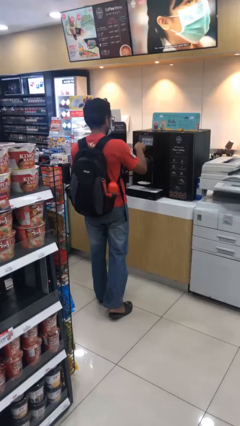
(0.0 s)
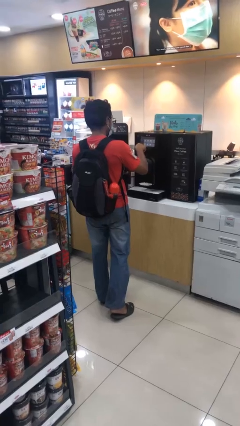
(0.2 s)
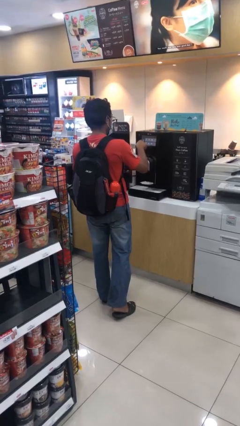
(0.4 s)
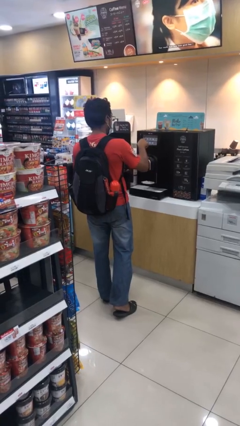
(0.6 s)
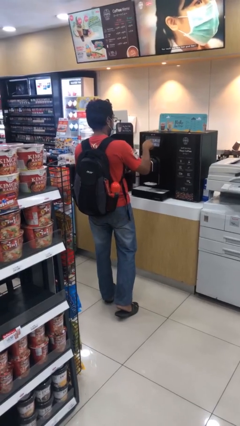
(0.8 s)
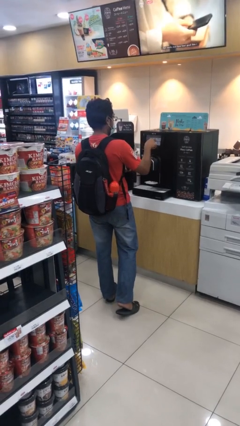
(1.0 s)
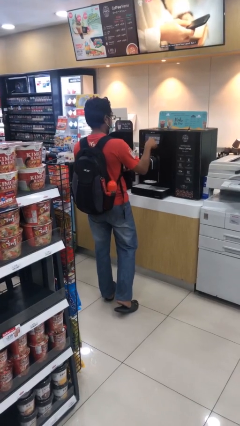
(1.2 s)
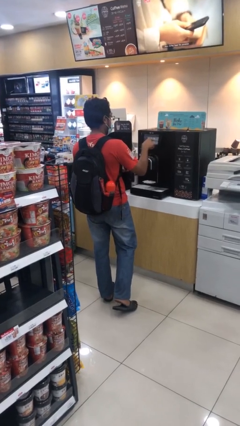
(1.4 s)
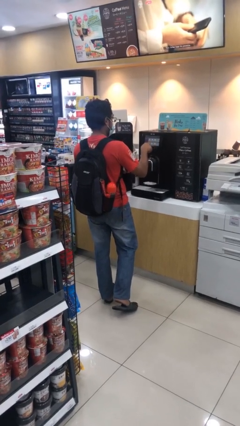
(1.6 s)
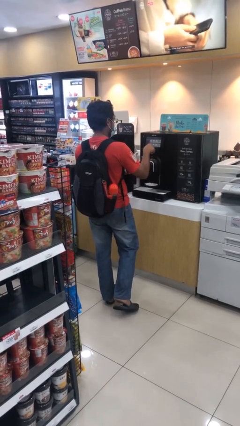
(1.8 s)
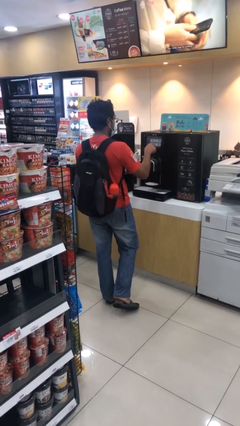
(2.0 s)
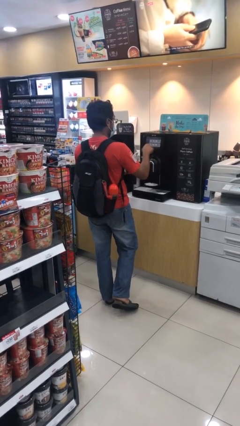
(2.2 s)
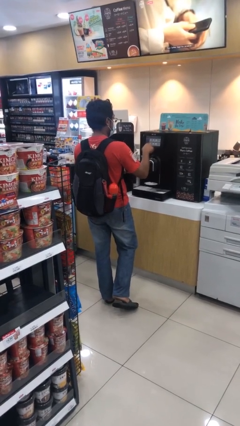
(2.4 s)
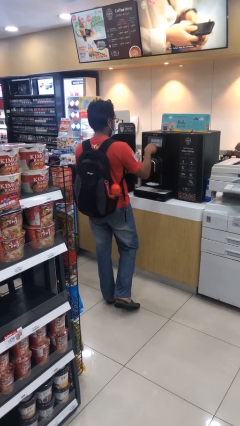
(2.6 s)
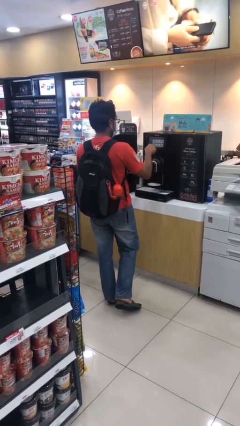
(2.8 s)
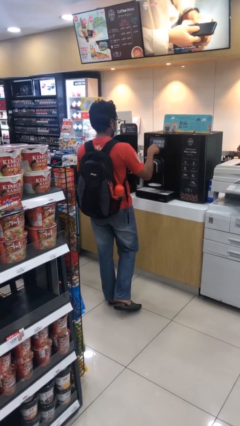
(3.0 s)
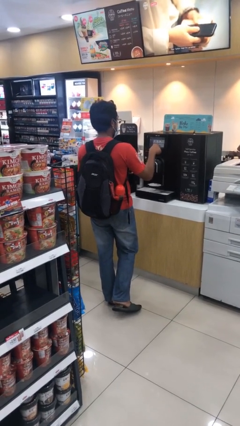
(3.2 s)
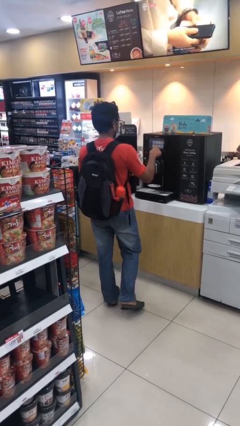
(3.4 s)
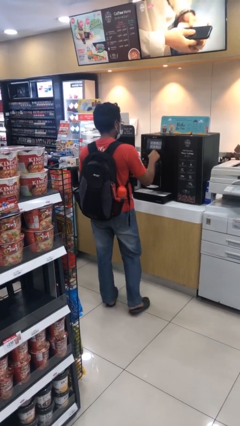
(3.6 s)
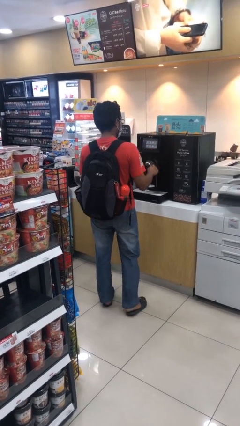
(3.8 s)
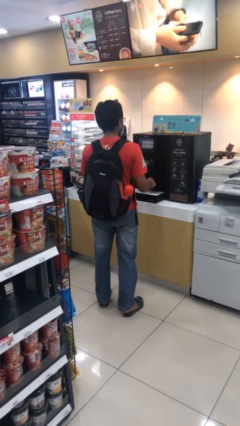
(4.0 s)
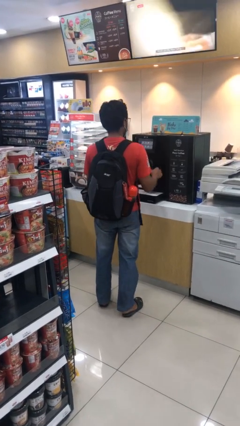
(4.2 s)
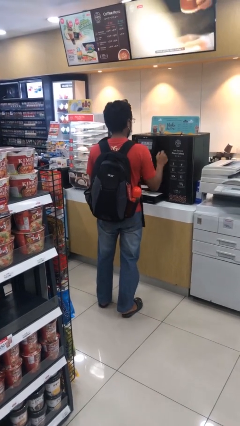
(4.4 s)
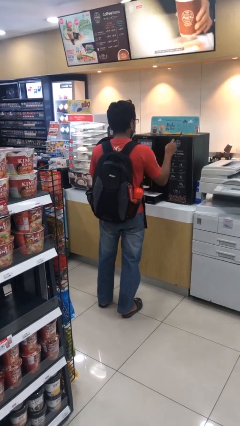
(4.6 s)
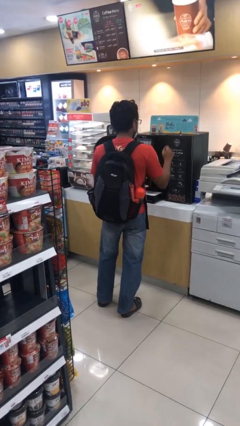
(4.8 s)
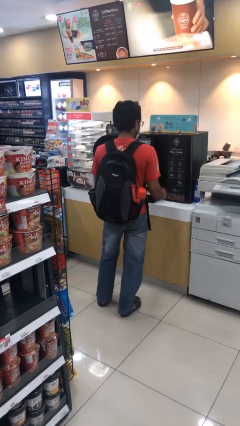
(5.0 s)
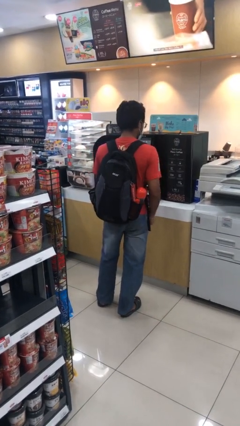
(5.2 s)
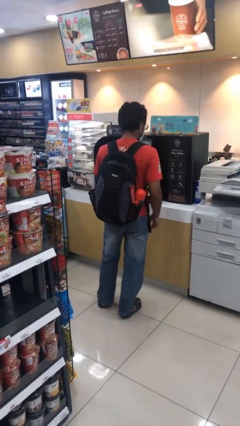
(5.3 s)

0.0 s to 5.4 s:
person purchases from machine

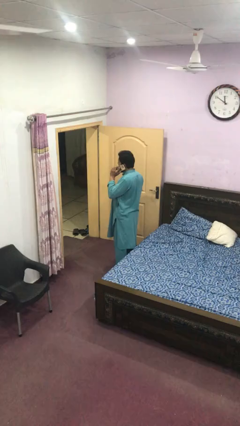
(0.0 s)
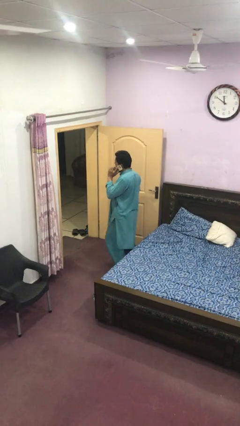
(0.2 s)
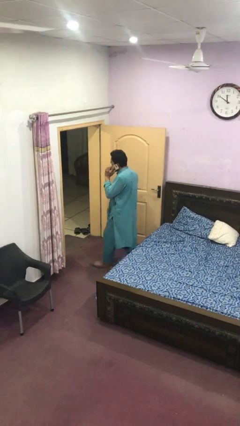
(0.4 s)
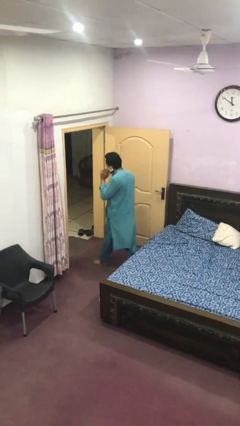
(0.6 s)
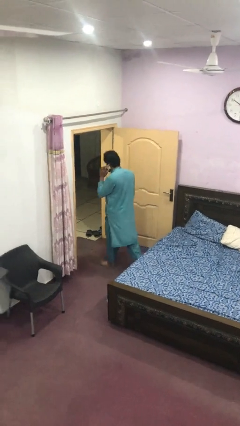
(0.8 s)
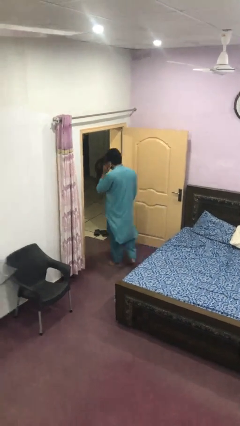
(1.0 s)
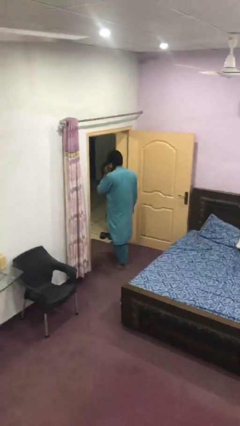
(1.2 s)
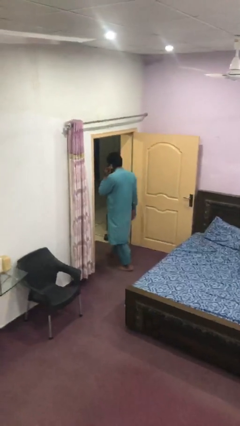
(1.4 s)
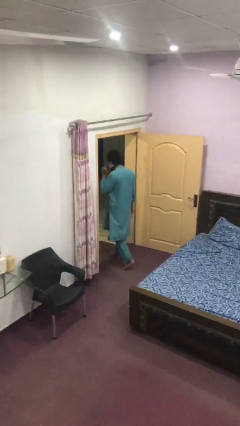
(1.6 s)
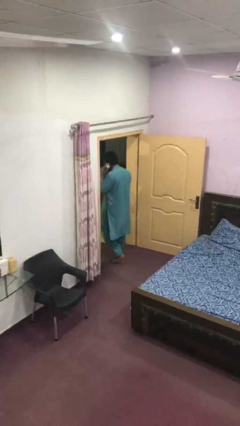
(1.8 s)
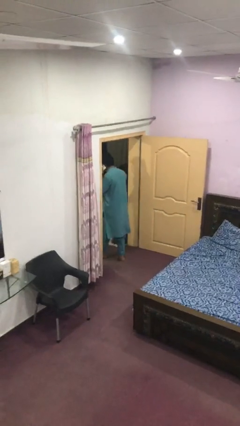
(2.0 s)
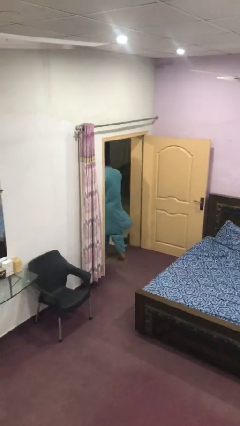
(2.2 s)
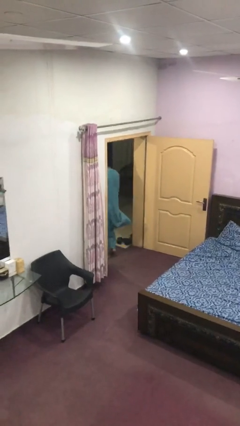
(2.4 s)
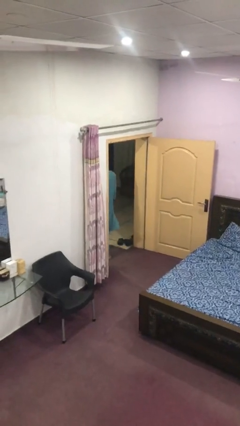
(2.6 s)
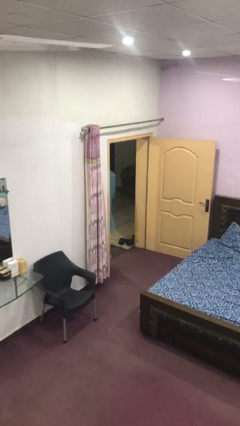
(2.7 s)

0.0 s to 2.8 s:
person exits scene through structure

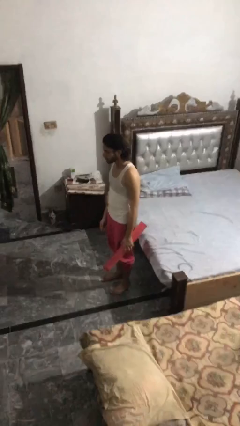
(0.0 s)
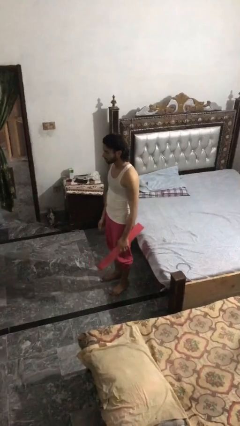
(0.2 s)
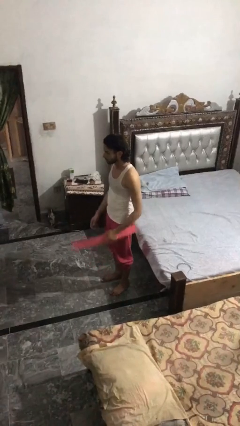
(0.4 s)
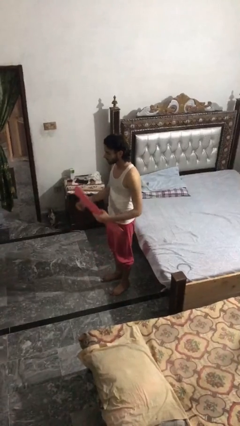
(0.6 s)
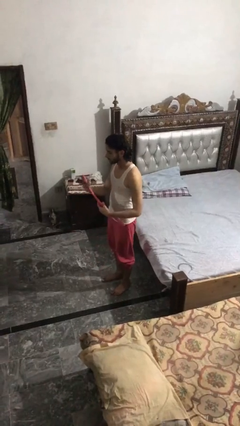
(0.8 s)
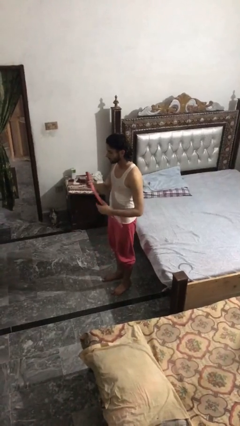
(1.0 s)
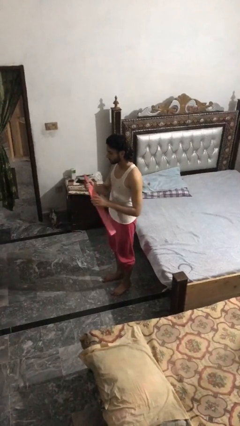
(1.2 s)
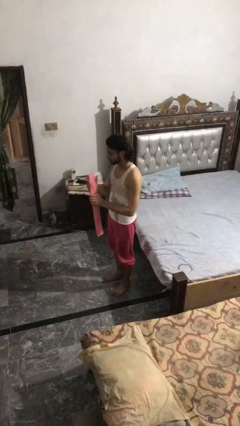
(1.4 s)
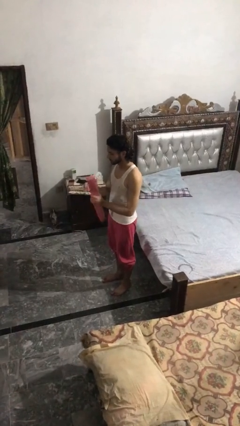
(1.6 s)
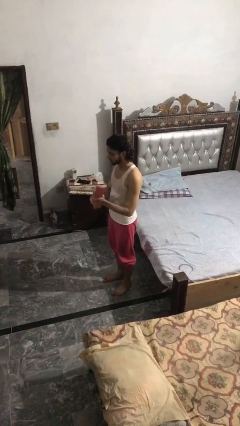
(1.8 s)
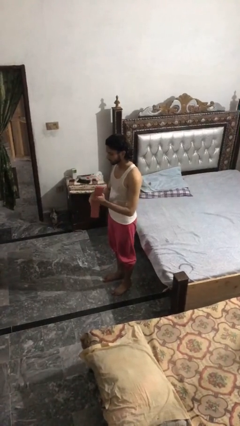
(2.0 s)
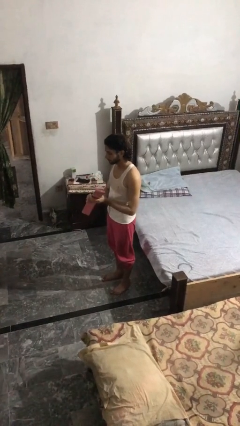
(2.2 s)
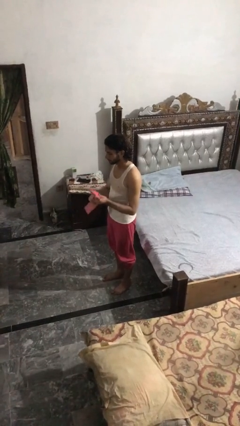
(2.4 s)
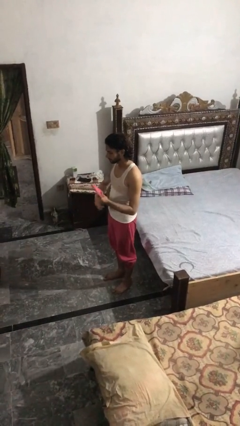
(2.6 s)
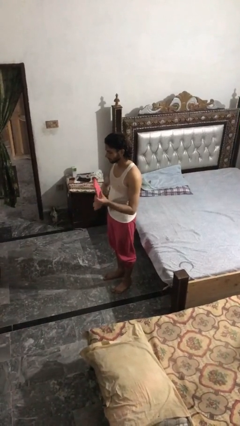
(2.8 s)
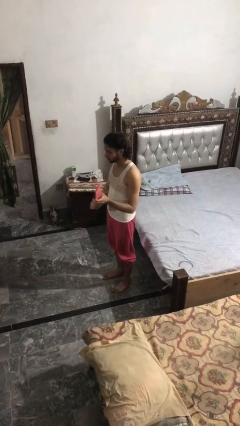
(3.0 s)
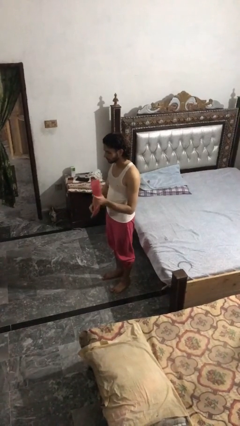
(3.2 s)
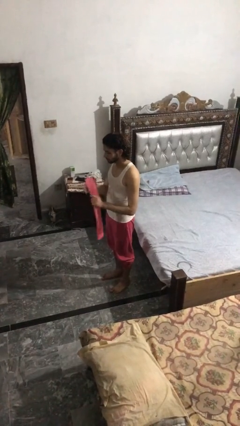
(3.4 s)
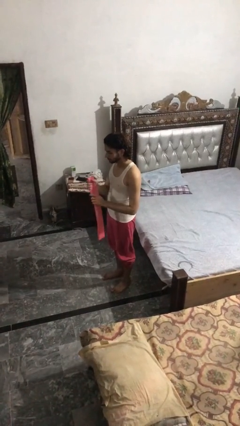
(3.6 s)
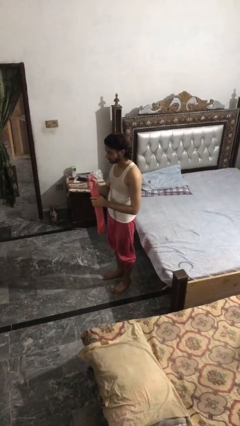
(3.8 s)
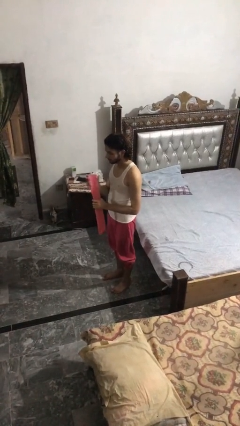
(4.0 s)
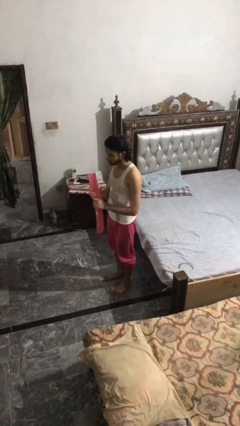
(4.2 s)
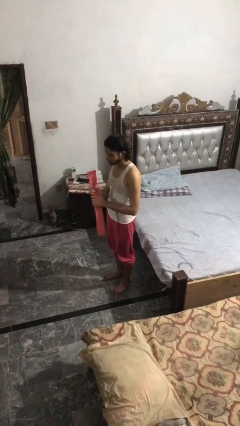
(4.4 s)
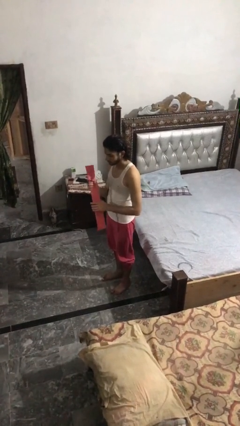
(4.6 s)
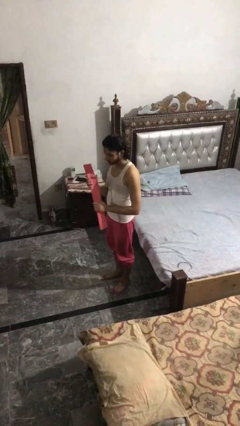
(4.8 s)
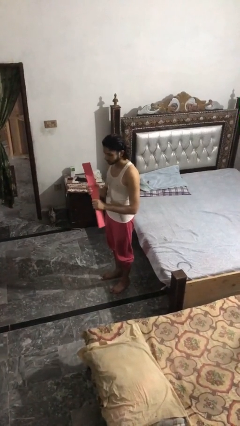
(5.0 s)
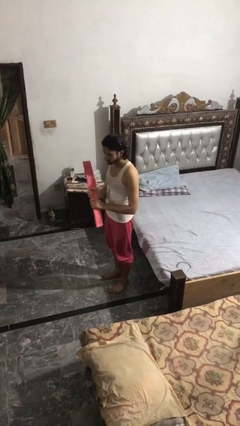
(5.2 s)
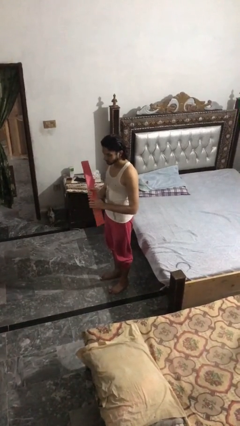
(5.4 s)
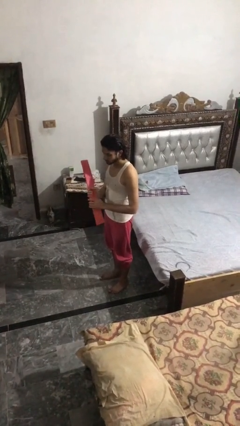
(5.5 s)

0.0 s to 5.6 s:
person squeezes object

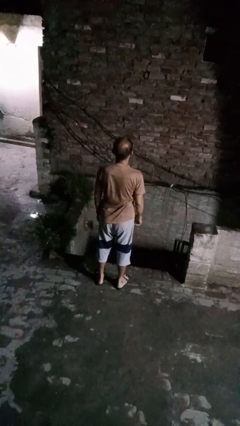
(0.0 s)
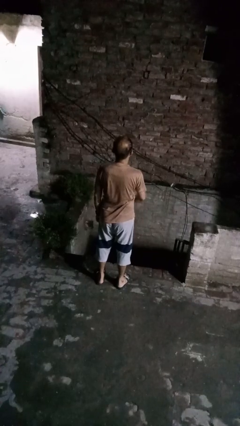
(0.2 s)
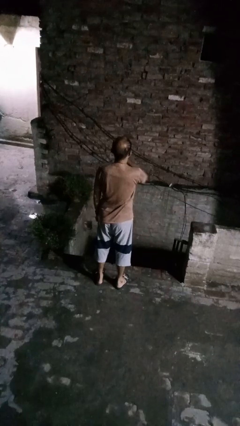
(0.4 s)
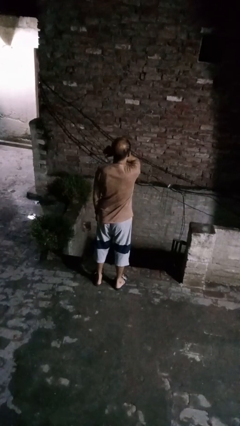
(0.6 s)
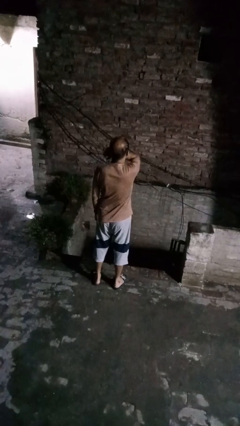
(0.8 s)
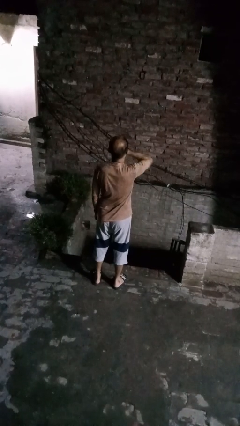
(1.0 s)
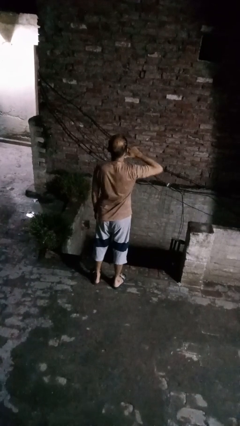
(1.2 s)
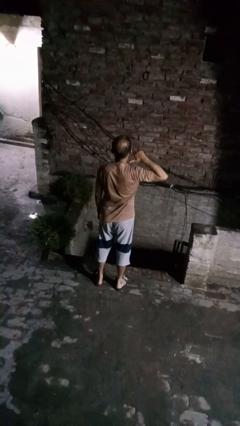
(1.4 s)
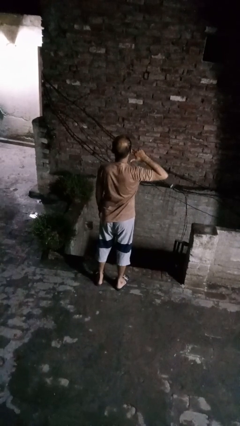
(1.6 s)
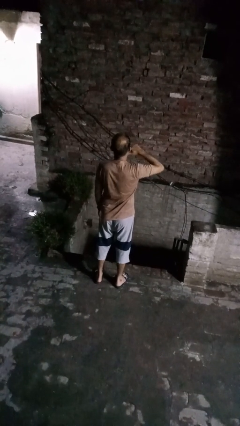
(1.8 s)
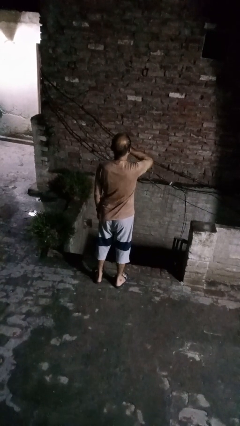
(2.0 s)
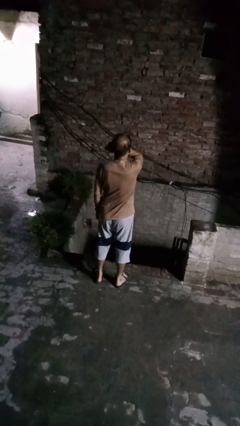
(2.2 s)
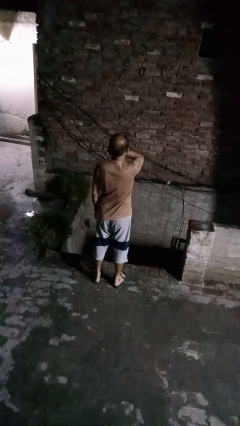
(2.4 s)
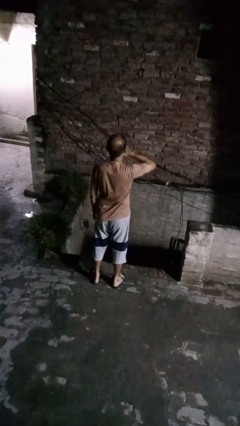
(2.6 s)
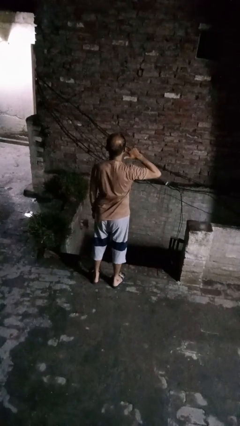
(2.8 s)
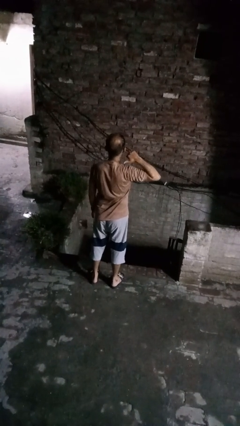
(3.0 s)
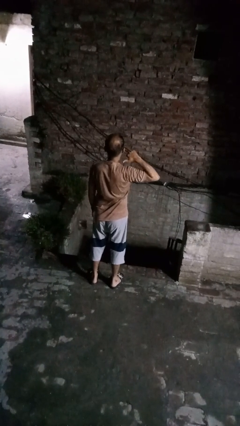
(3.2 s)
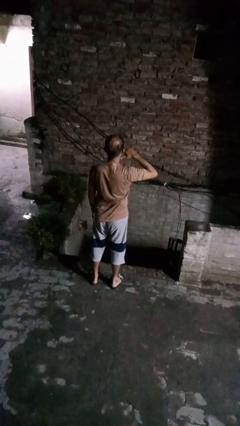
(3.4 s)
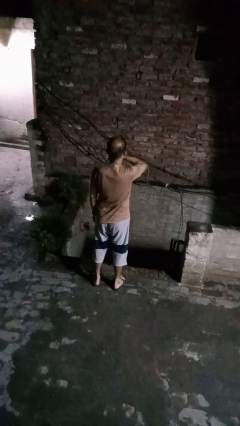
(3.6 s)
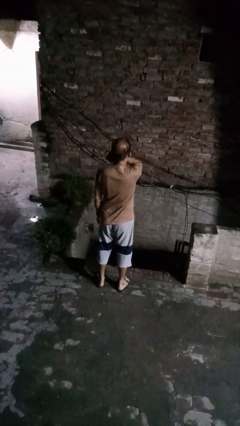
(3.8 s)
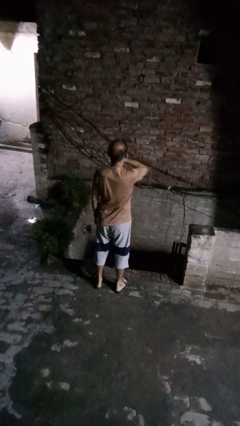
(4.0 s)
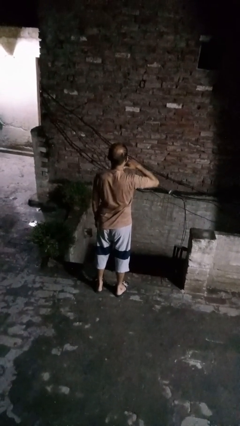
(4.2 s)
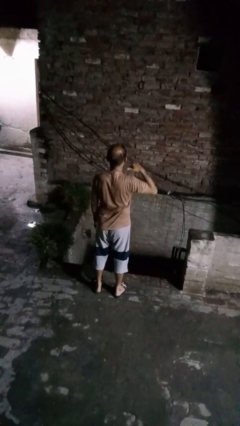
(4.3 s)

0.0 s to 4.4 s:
person gestures cut
